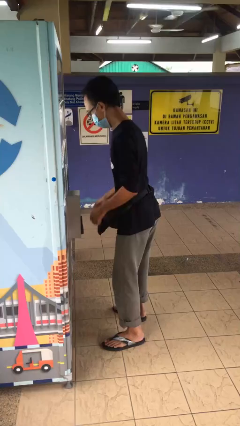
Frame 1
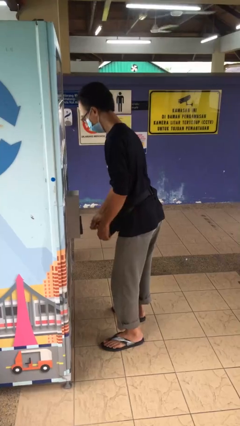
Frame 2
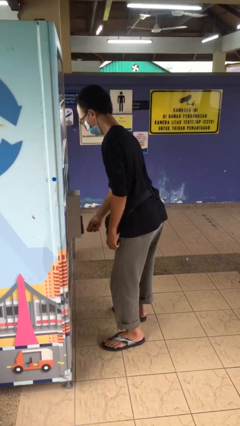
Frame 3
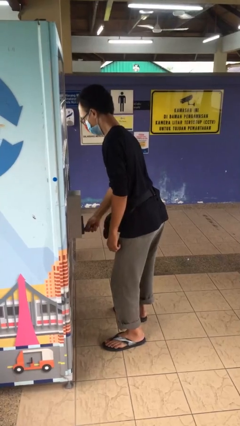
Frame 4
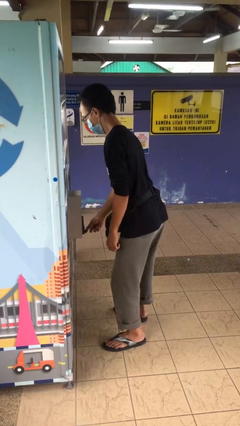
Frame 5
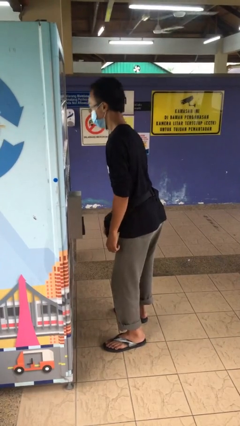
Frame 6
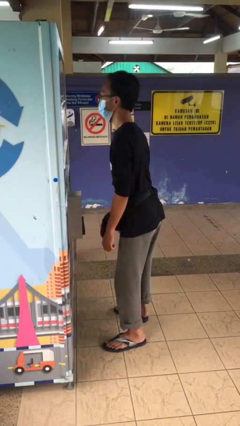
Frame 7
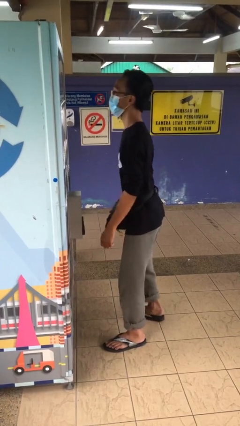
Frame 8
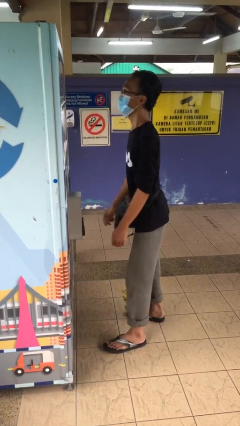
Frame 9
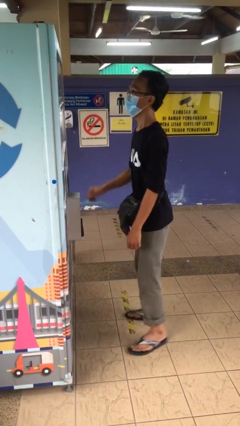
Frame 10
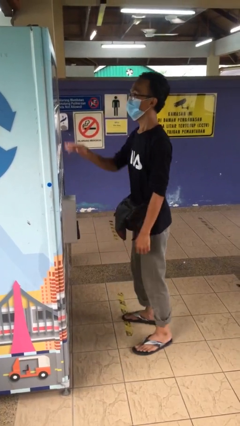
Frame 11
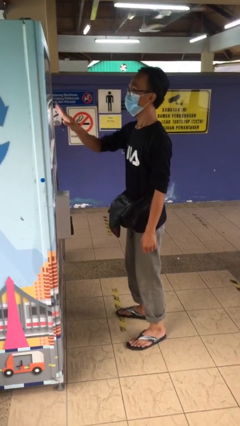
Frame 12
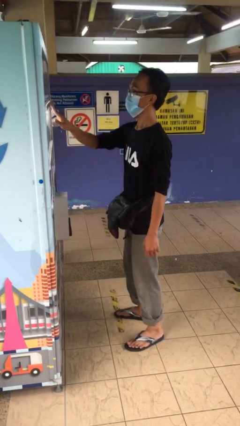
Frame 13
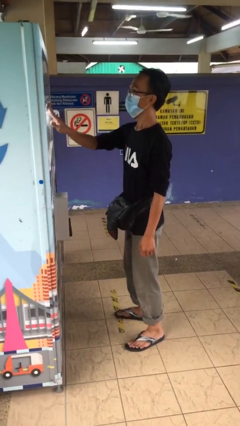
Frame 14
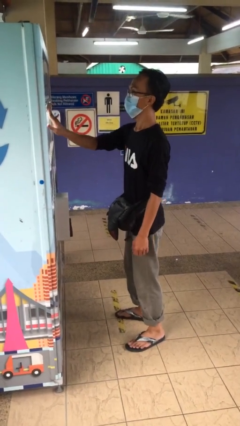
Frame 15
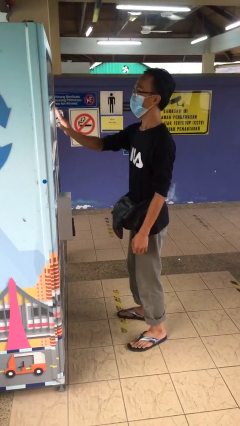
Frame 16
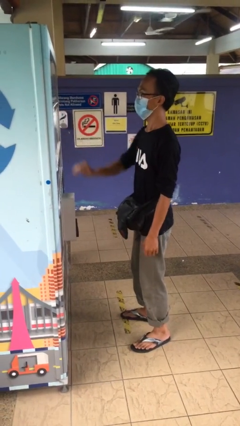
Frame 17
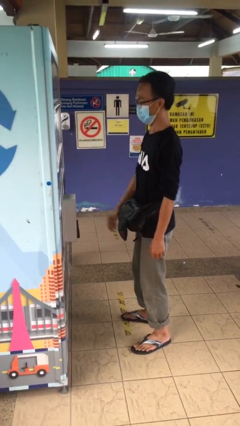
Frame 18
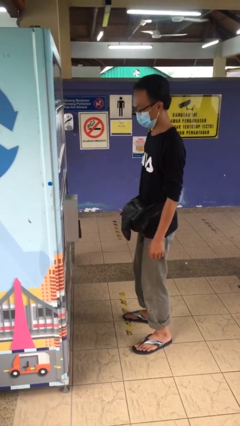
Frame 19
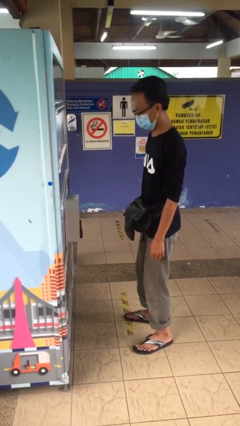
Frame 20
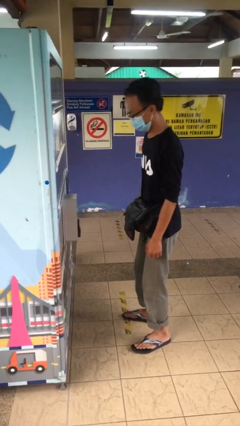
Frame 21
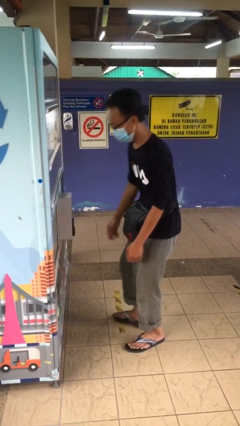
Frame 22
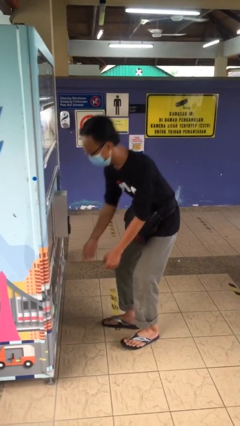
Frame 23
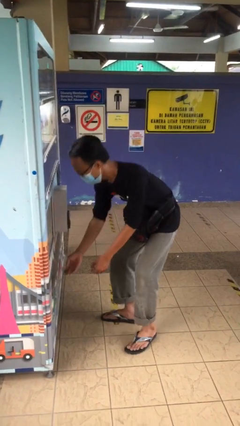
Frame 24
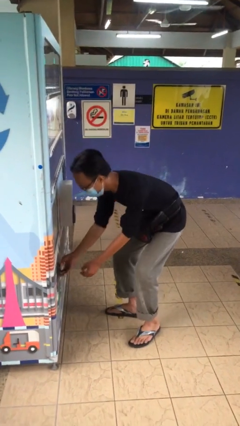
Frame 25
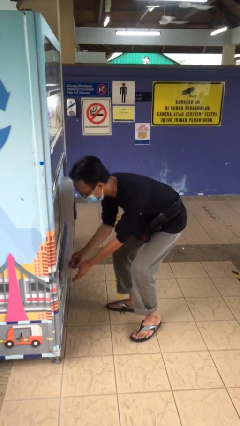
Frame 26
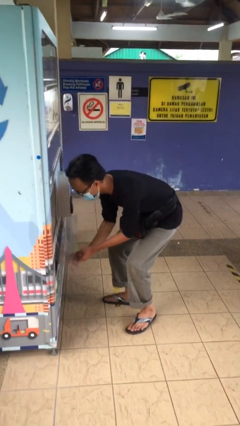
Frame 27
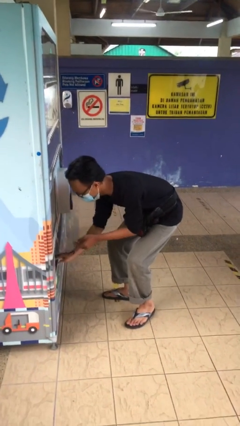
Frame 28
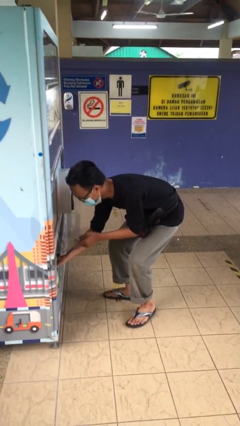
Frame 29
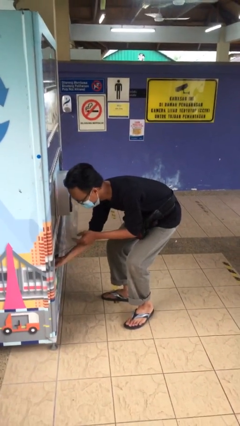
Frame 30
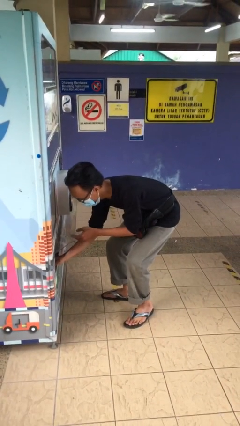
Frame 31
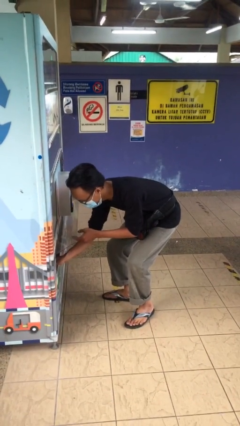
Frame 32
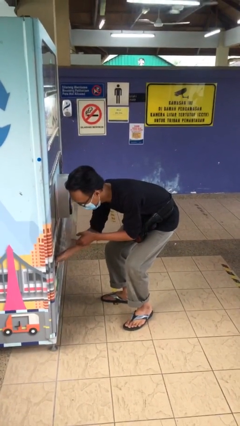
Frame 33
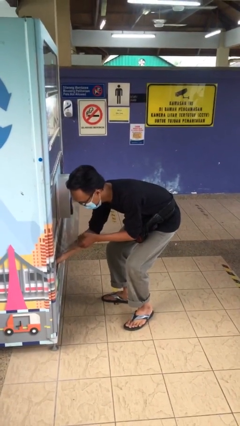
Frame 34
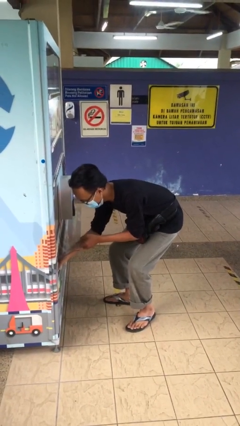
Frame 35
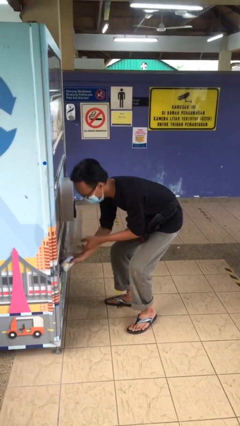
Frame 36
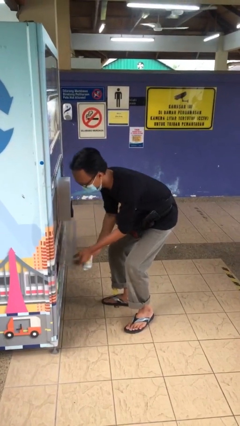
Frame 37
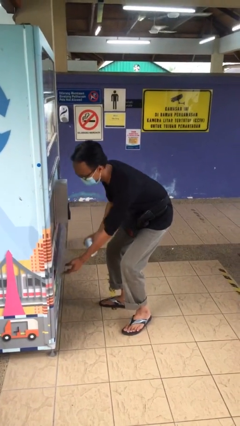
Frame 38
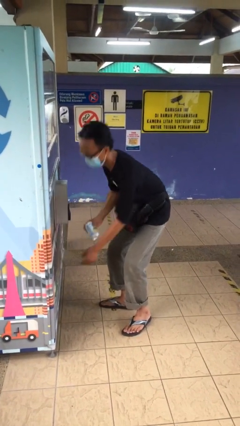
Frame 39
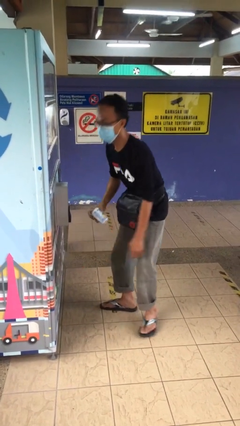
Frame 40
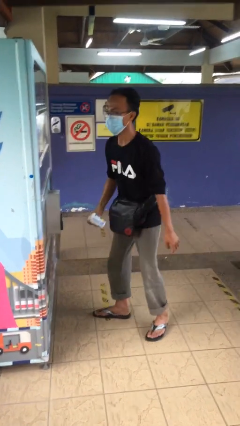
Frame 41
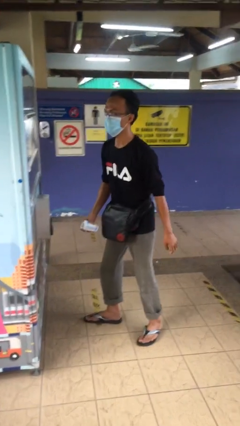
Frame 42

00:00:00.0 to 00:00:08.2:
person purchases from machine

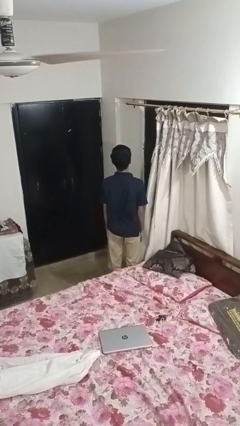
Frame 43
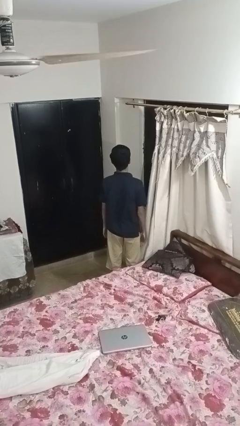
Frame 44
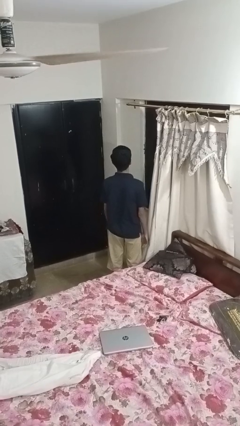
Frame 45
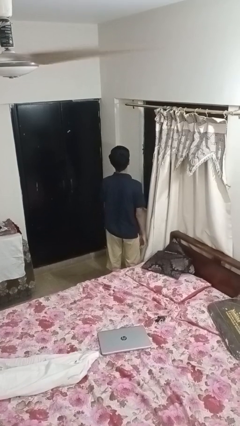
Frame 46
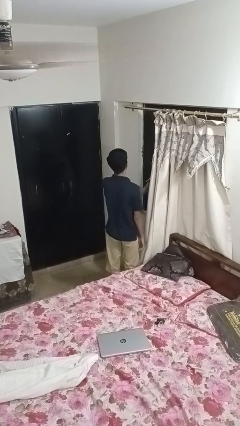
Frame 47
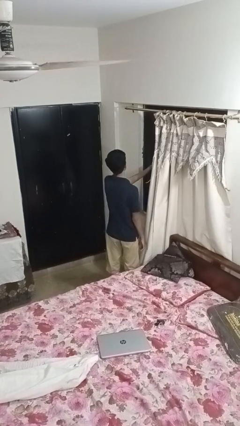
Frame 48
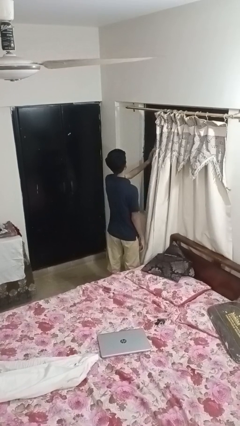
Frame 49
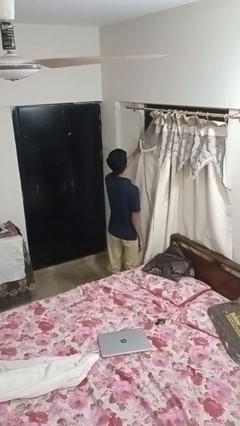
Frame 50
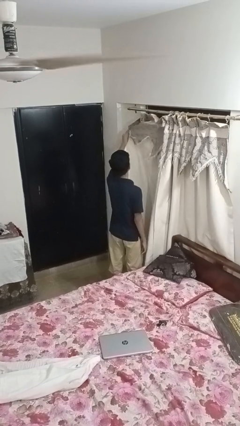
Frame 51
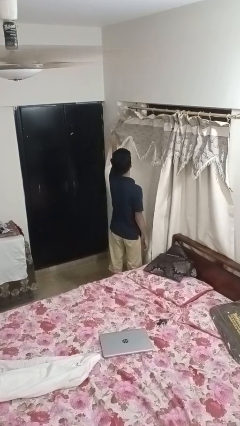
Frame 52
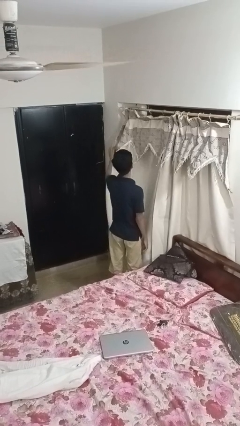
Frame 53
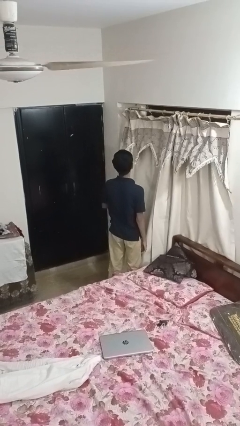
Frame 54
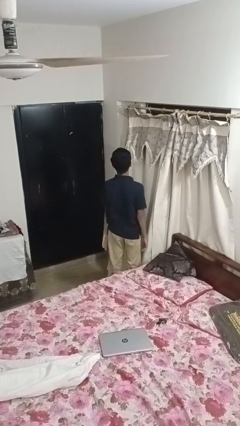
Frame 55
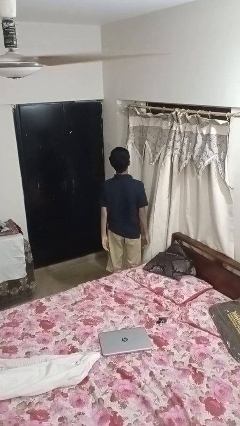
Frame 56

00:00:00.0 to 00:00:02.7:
person closes curtains

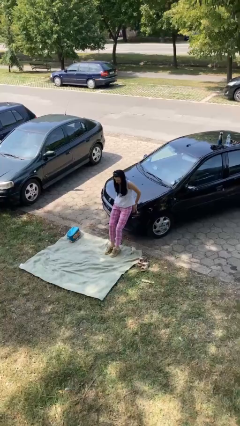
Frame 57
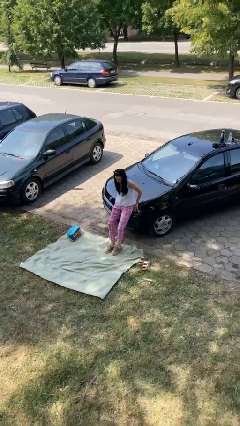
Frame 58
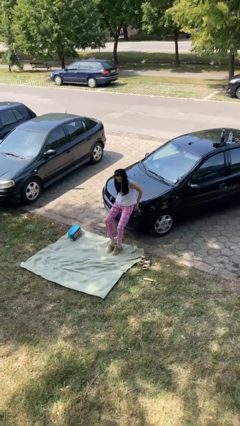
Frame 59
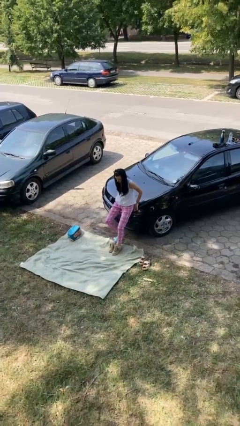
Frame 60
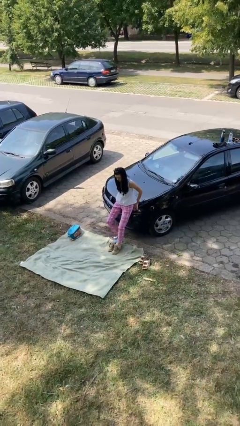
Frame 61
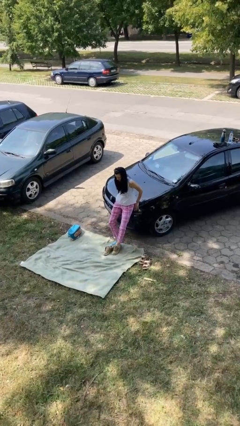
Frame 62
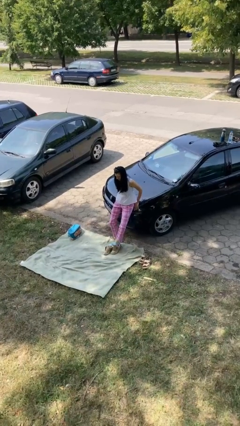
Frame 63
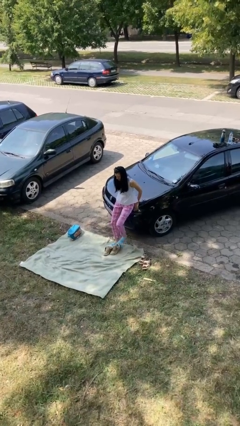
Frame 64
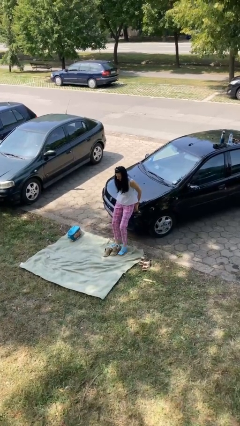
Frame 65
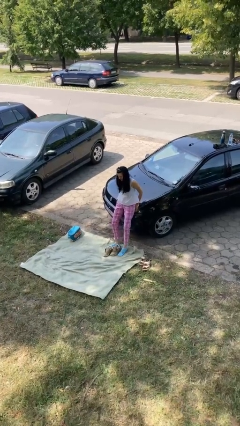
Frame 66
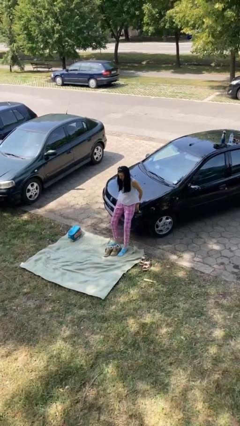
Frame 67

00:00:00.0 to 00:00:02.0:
person takes off shoes

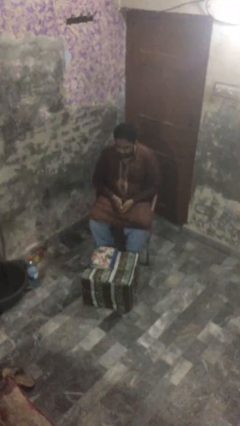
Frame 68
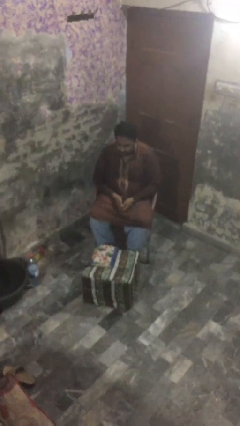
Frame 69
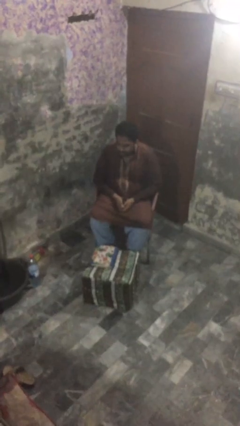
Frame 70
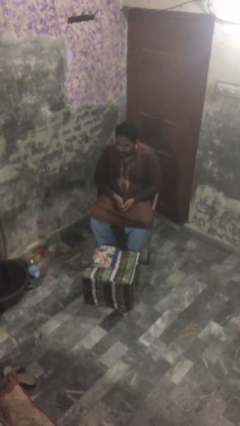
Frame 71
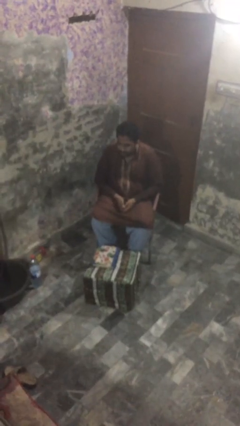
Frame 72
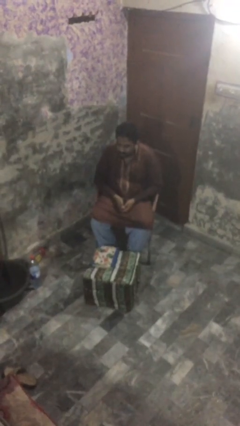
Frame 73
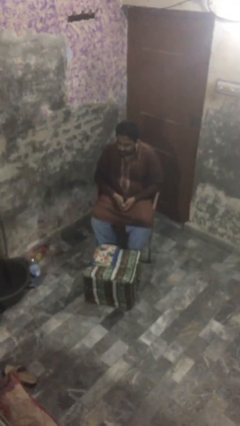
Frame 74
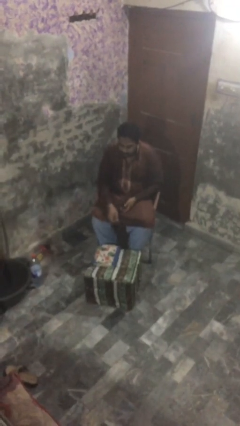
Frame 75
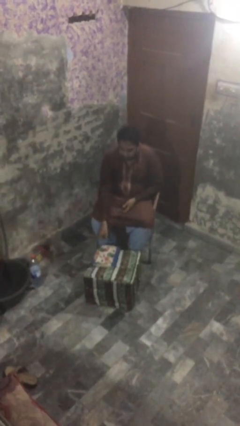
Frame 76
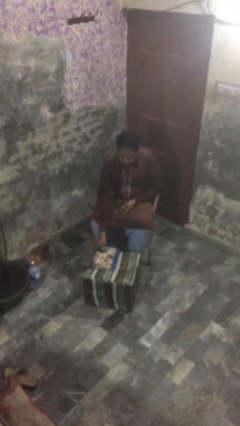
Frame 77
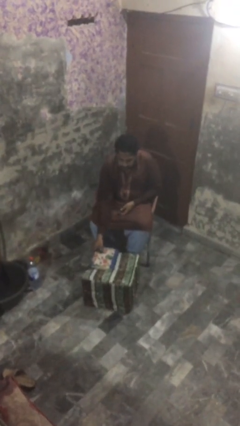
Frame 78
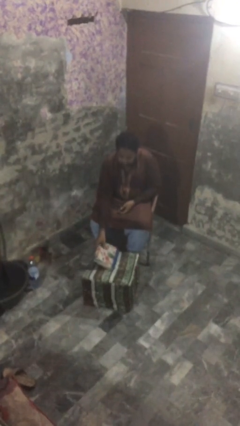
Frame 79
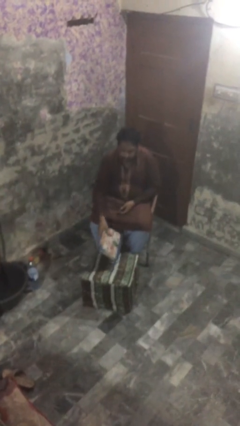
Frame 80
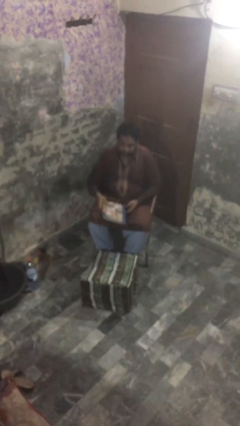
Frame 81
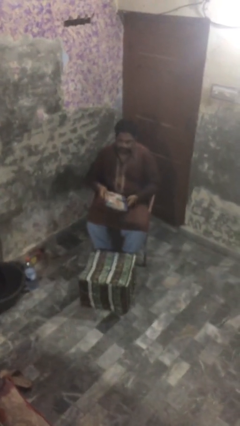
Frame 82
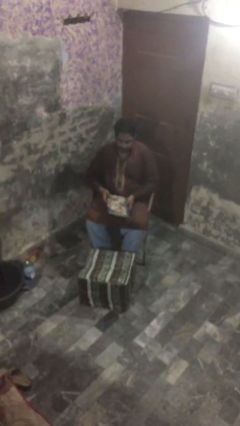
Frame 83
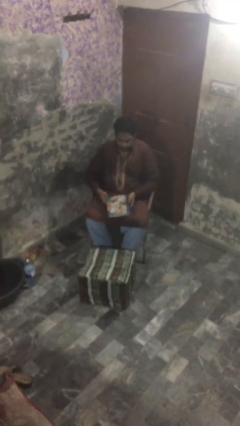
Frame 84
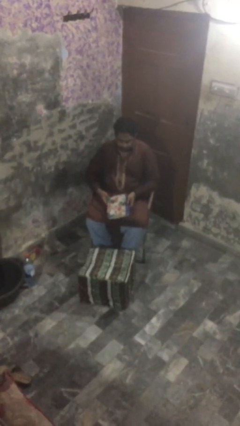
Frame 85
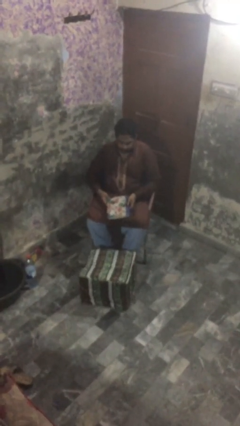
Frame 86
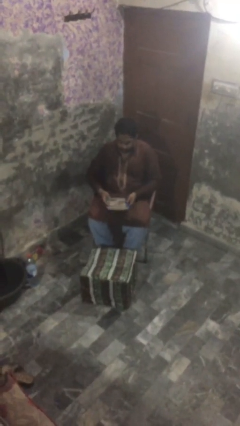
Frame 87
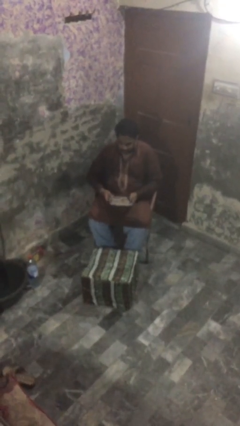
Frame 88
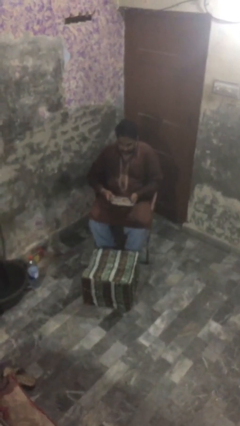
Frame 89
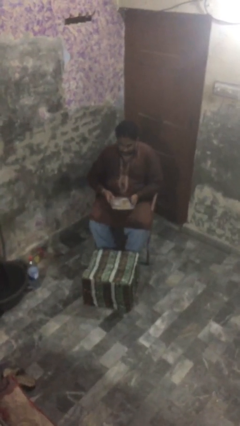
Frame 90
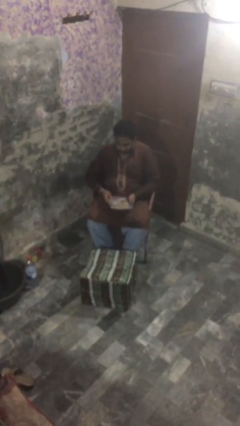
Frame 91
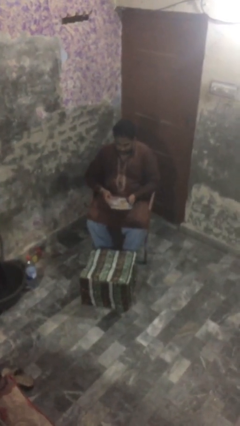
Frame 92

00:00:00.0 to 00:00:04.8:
person picks up object from table
